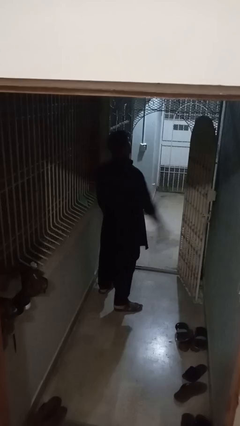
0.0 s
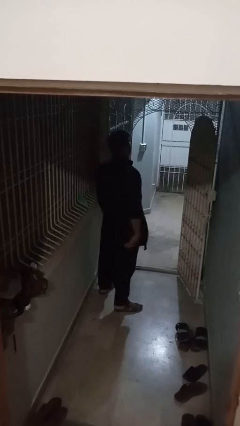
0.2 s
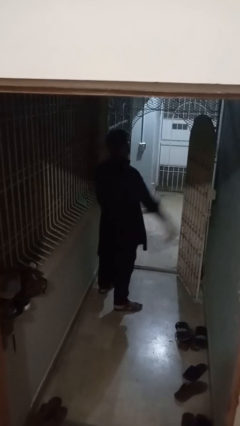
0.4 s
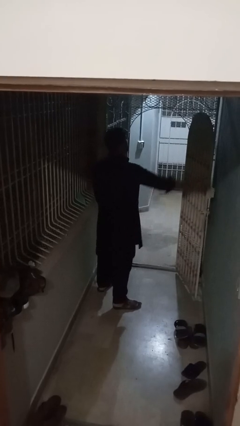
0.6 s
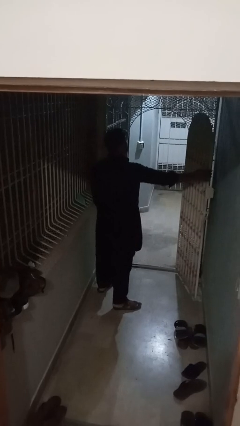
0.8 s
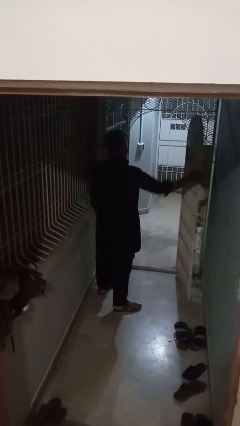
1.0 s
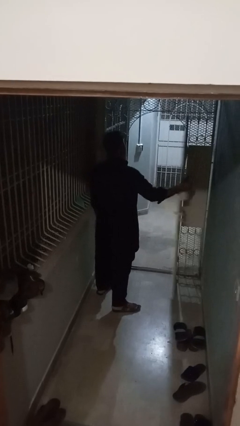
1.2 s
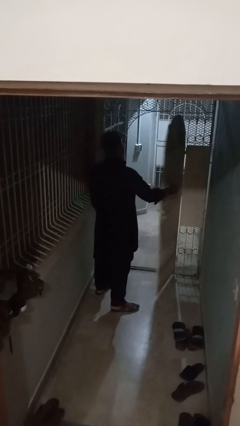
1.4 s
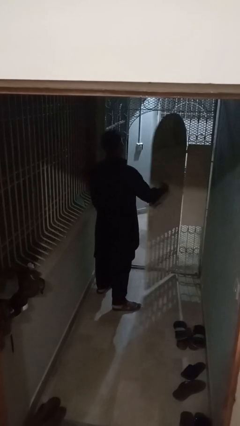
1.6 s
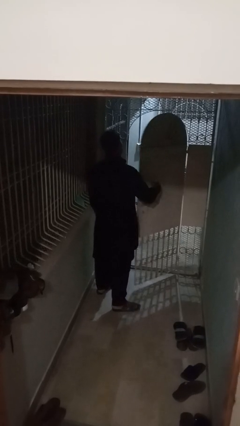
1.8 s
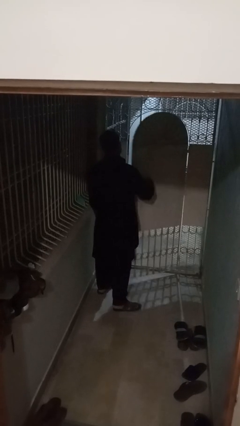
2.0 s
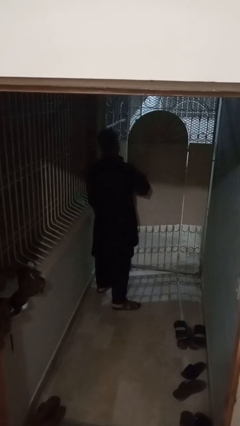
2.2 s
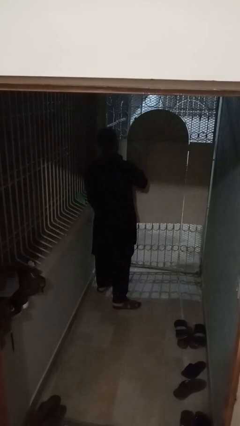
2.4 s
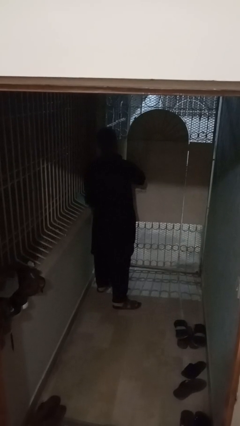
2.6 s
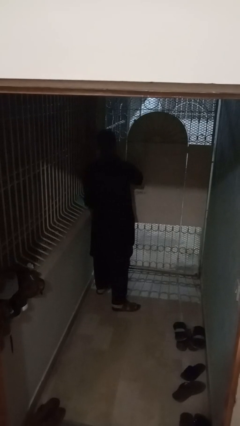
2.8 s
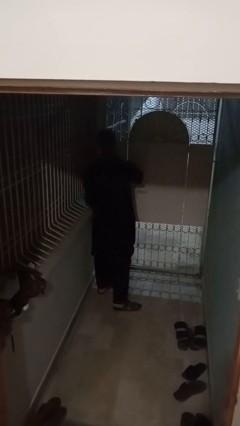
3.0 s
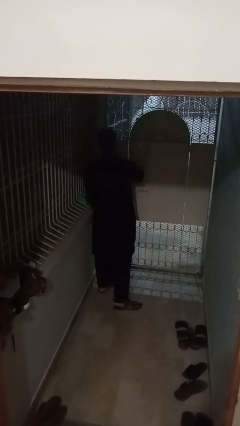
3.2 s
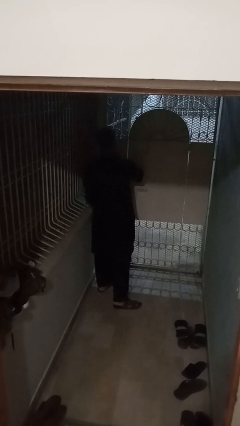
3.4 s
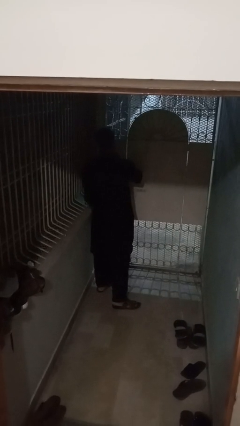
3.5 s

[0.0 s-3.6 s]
person closes gate

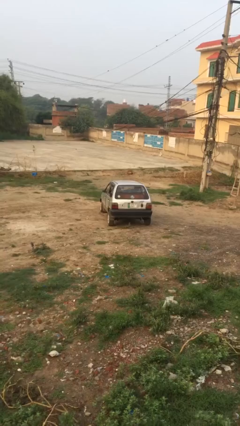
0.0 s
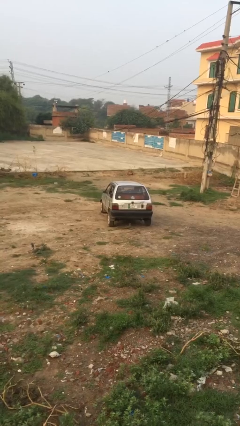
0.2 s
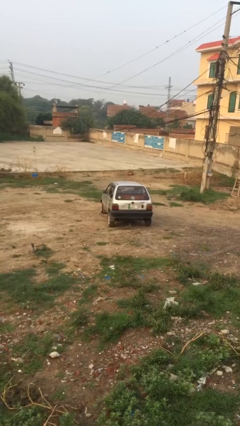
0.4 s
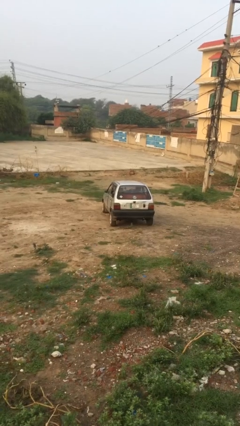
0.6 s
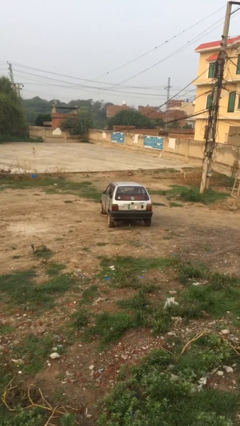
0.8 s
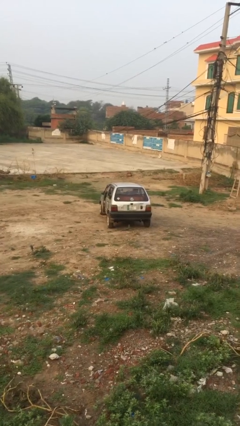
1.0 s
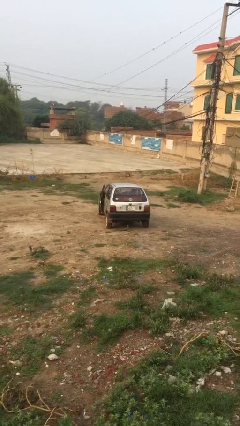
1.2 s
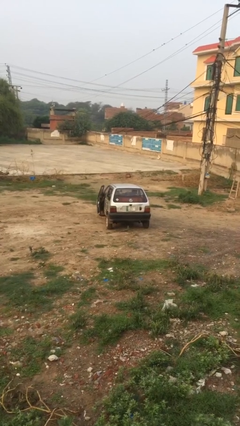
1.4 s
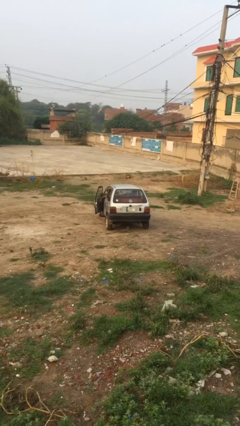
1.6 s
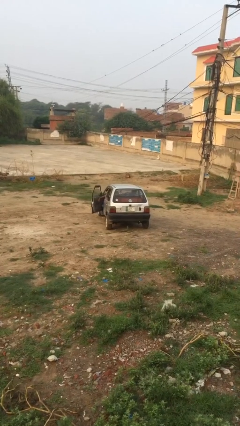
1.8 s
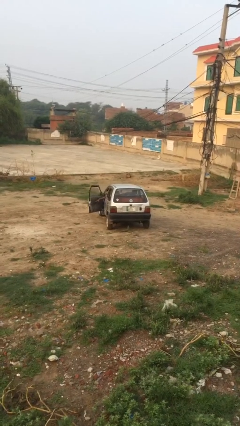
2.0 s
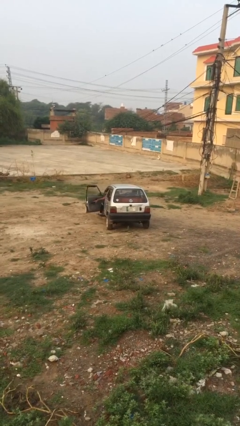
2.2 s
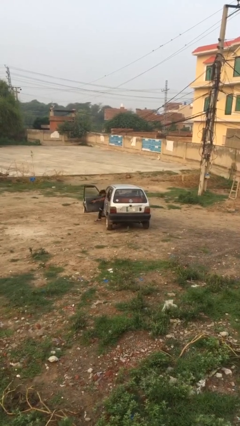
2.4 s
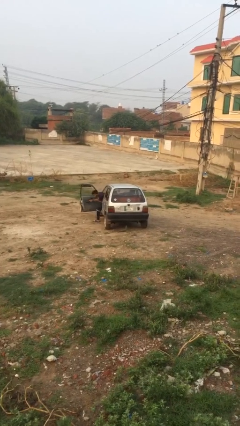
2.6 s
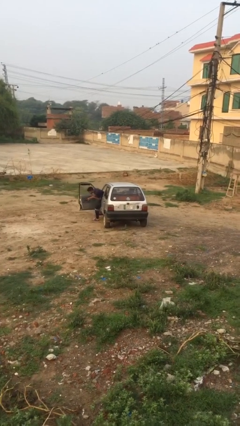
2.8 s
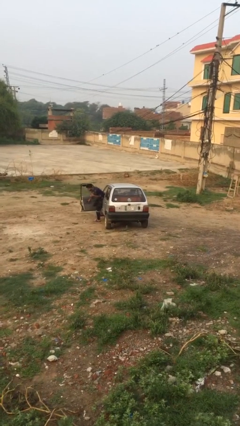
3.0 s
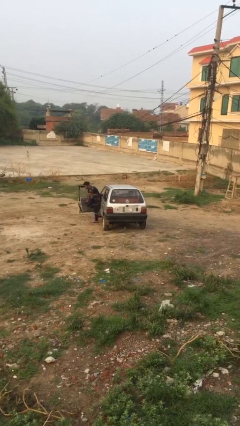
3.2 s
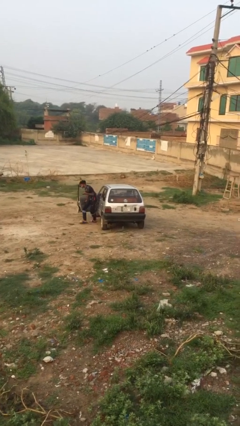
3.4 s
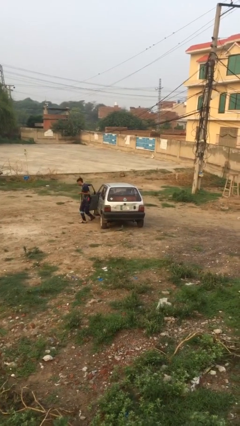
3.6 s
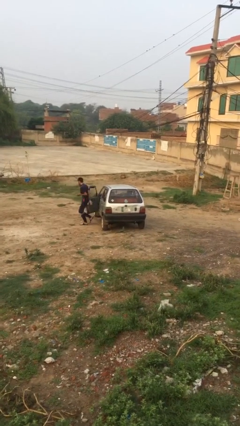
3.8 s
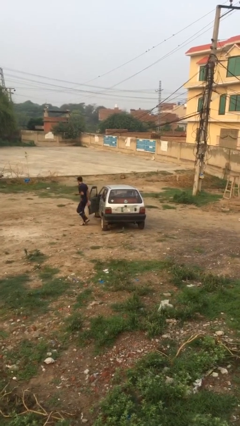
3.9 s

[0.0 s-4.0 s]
car drops off person

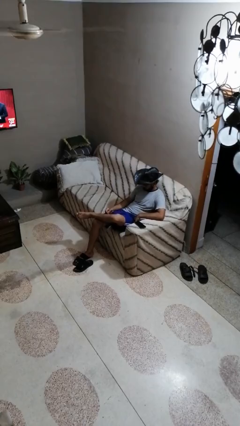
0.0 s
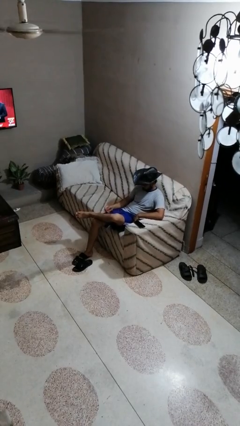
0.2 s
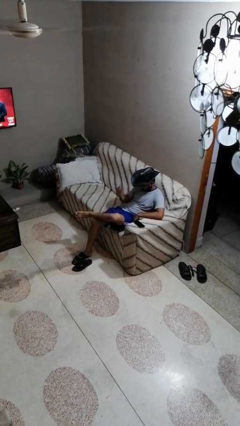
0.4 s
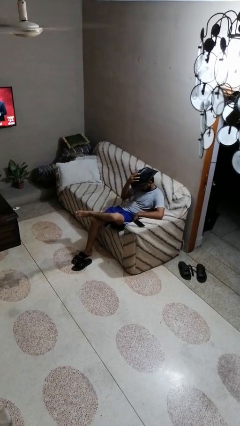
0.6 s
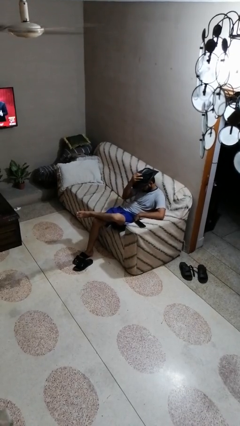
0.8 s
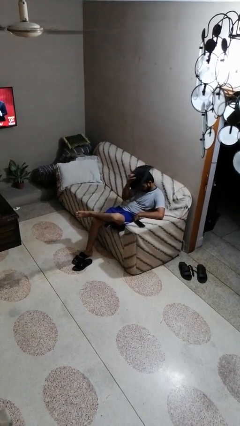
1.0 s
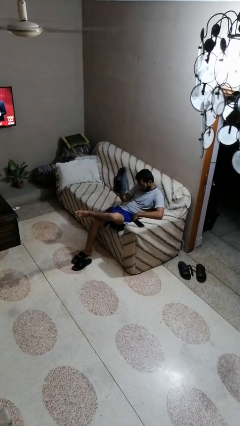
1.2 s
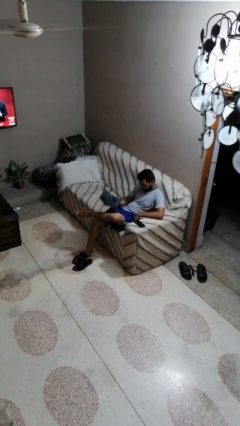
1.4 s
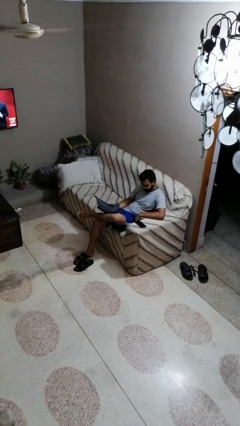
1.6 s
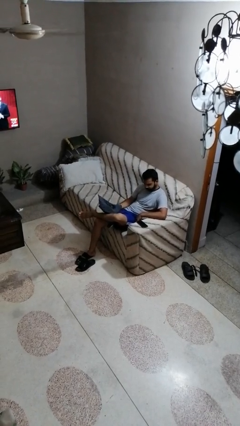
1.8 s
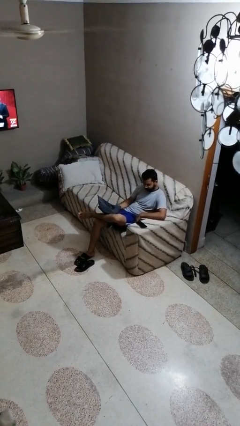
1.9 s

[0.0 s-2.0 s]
person takes off hat

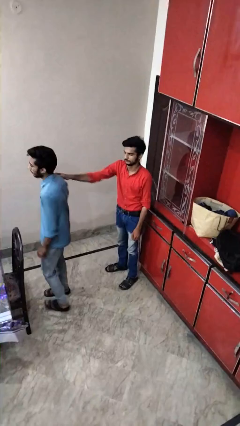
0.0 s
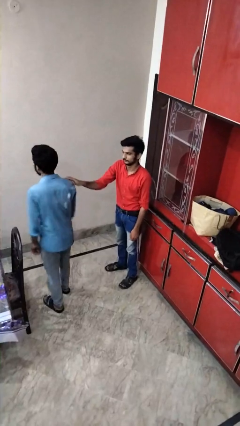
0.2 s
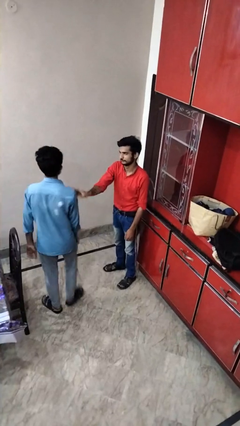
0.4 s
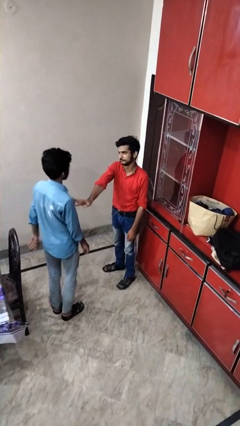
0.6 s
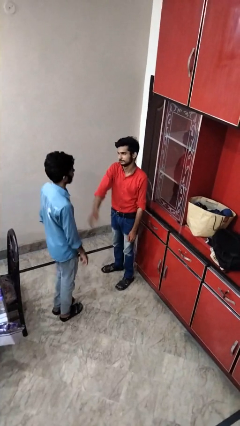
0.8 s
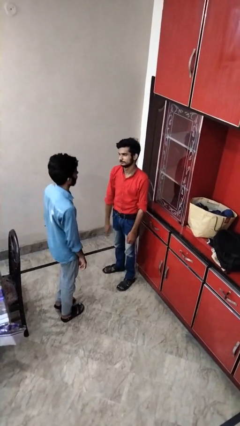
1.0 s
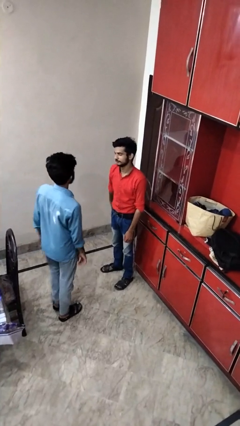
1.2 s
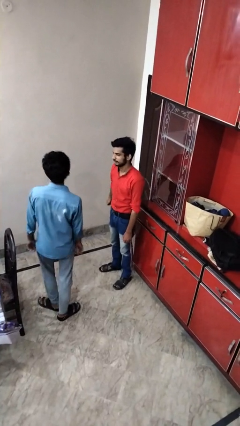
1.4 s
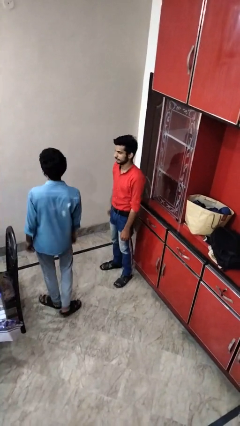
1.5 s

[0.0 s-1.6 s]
person spins person around

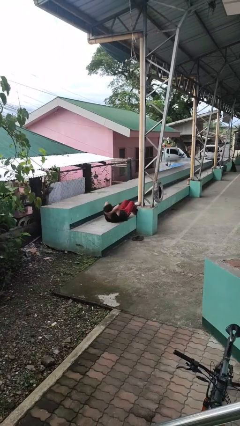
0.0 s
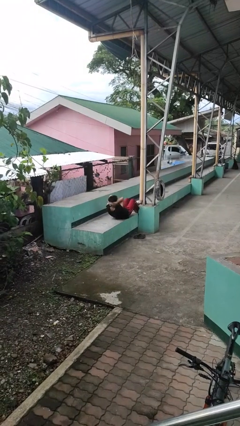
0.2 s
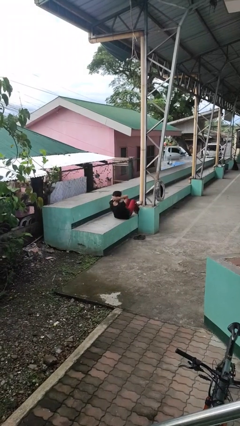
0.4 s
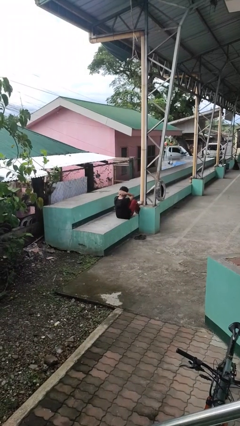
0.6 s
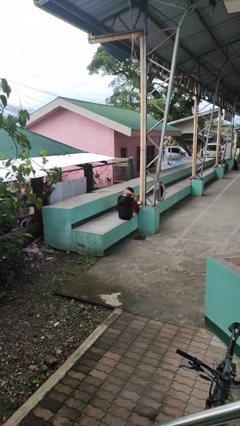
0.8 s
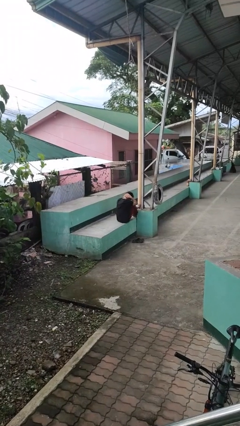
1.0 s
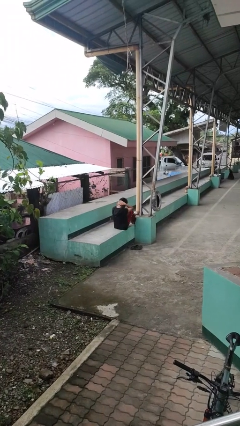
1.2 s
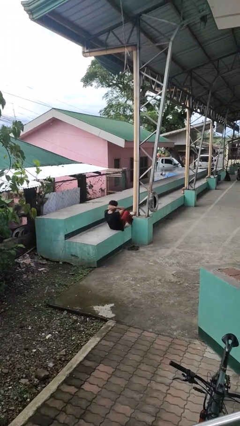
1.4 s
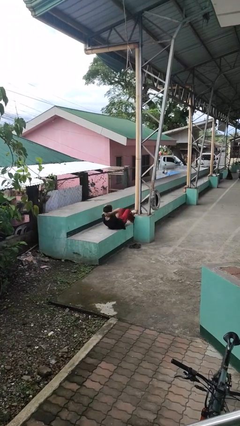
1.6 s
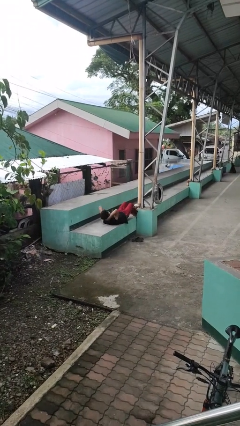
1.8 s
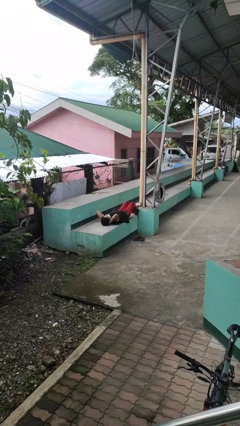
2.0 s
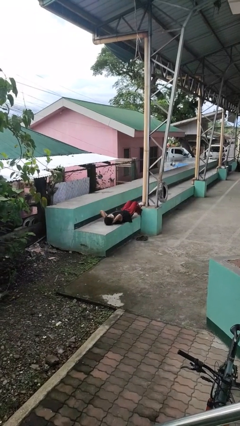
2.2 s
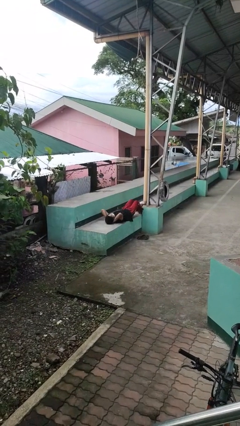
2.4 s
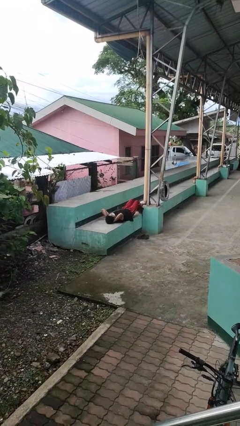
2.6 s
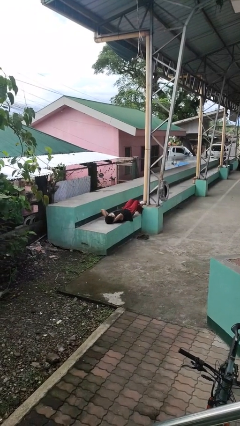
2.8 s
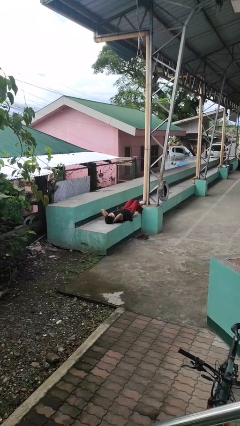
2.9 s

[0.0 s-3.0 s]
person exercises with situp

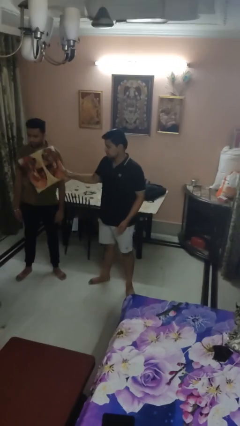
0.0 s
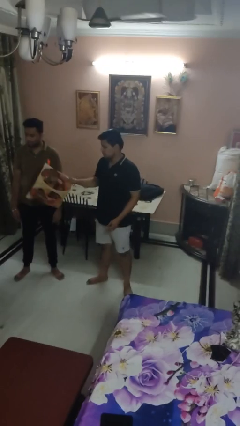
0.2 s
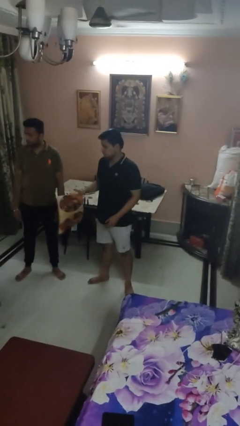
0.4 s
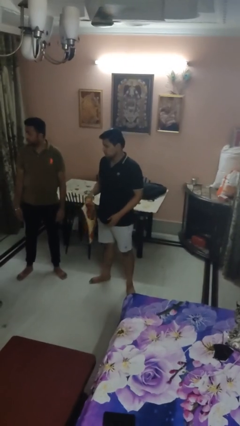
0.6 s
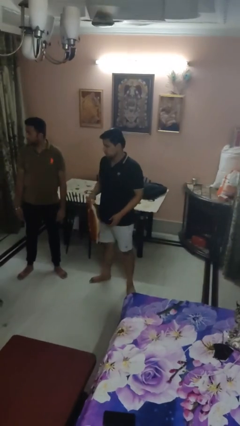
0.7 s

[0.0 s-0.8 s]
person hits person with pillow

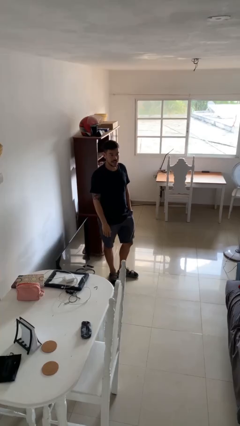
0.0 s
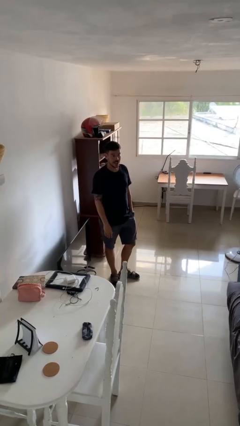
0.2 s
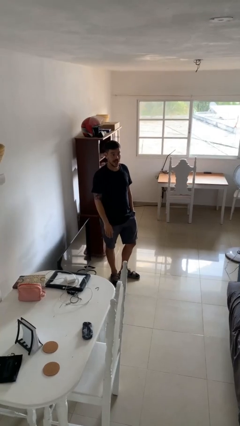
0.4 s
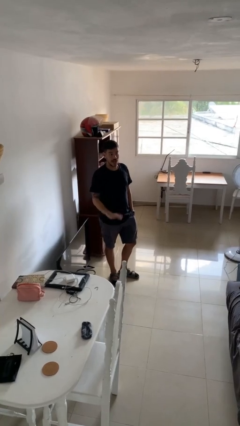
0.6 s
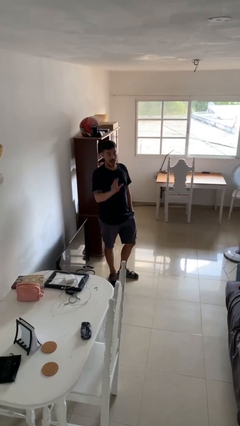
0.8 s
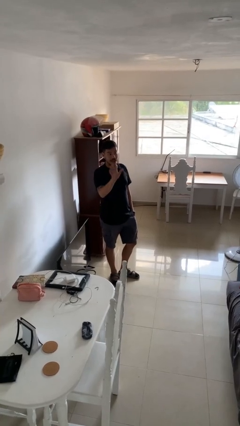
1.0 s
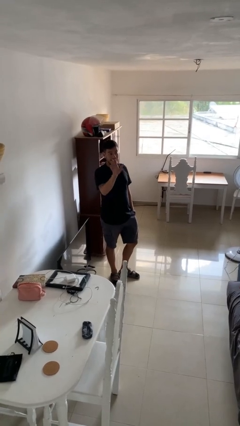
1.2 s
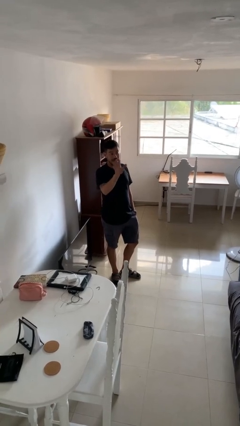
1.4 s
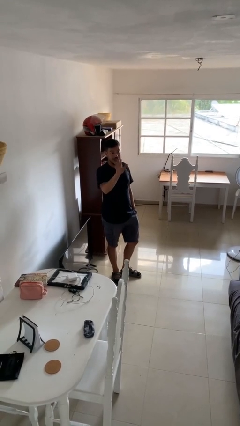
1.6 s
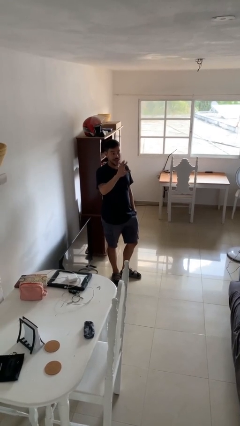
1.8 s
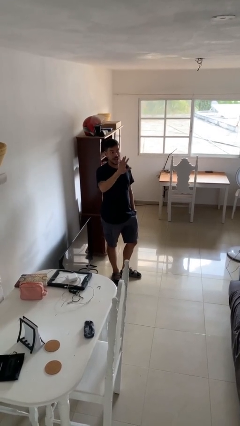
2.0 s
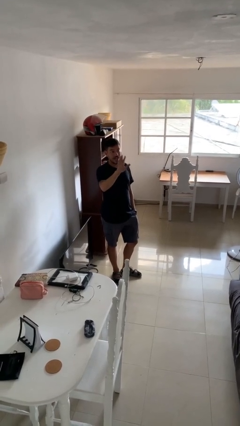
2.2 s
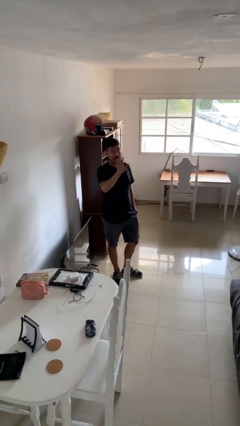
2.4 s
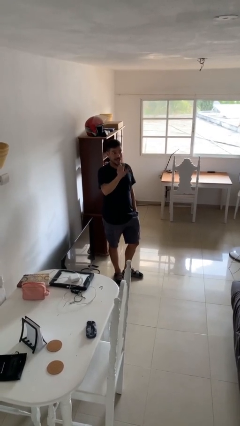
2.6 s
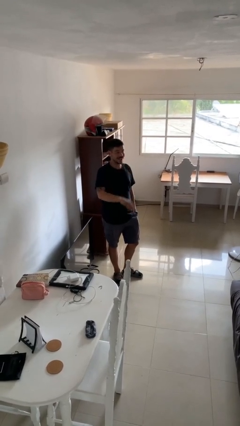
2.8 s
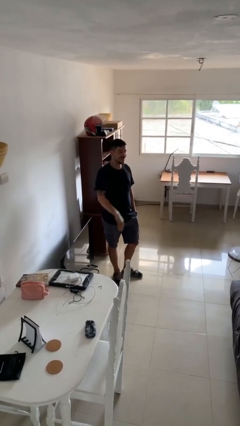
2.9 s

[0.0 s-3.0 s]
person waves at person
